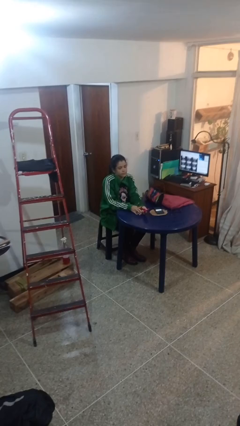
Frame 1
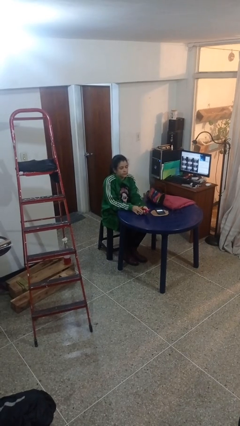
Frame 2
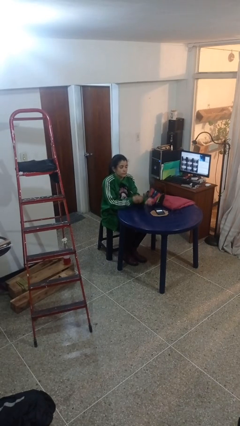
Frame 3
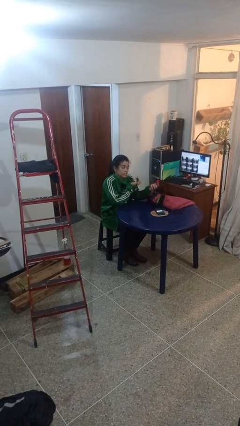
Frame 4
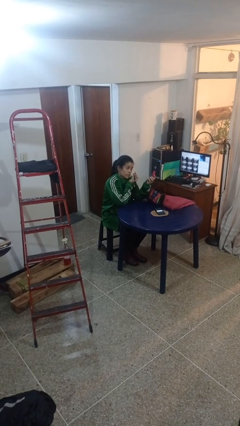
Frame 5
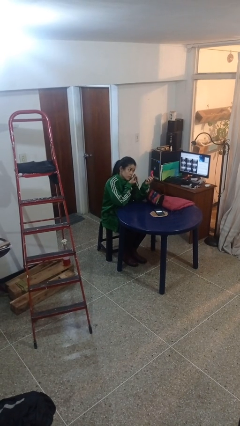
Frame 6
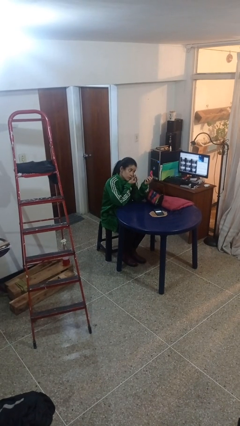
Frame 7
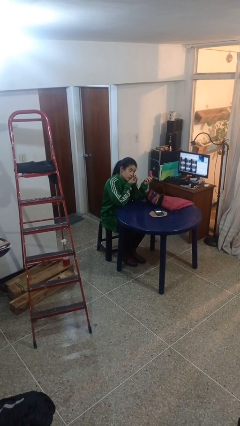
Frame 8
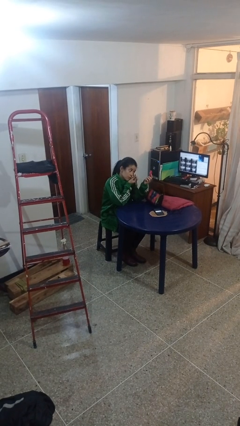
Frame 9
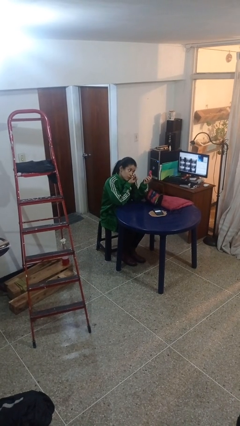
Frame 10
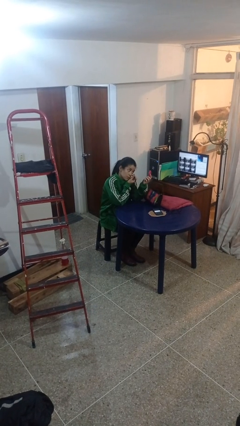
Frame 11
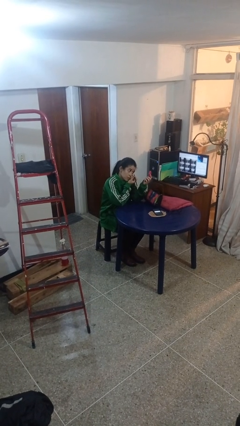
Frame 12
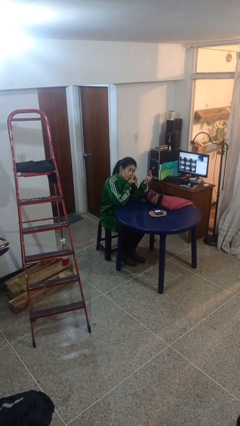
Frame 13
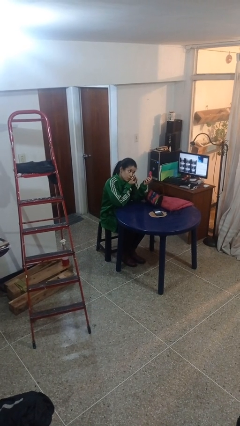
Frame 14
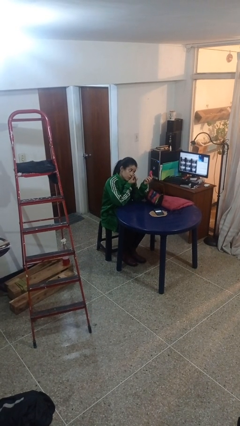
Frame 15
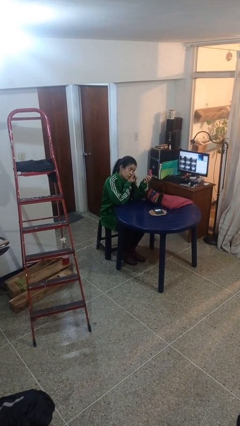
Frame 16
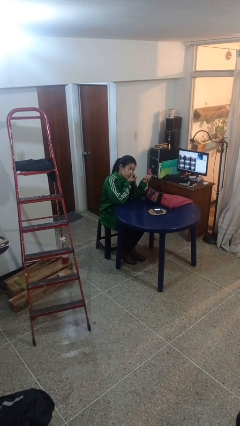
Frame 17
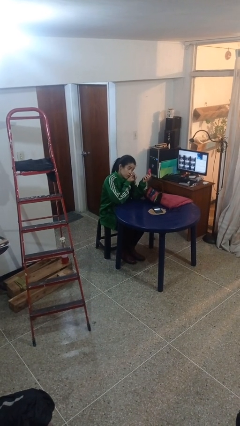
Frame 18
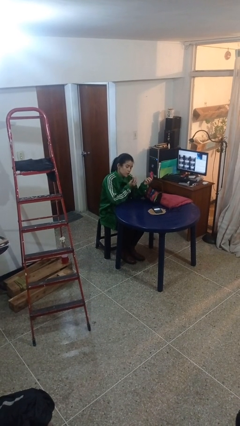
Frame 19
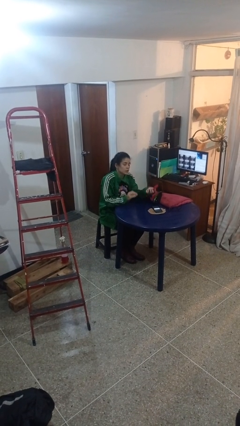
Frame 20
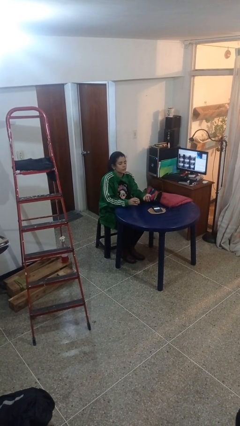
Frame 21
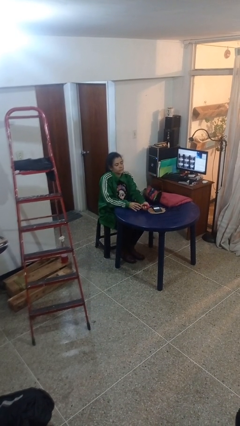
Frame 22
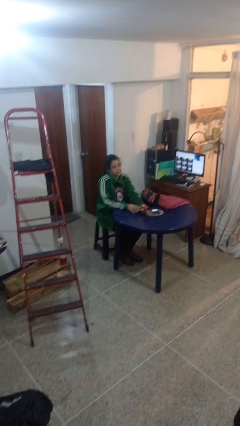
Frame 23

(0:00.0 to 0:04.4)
person applies eye makeup

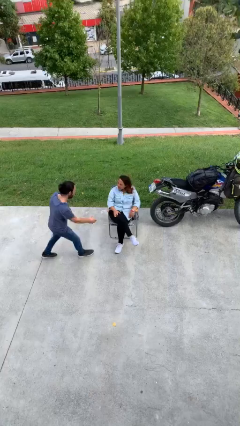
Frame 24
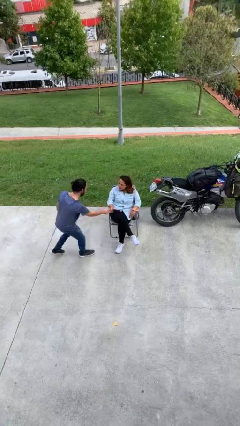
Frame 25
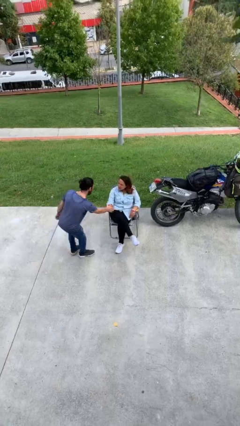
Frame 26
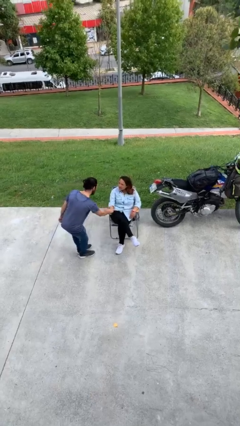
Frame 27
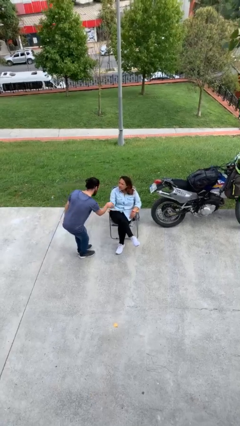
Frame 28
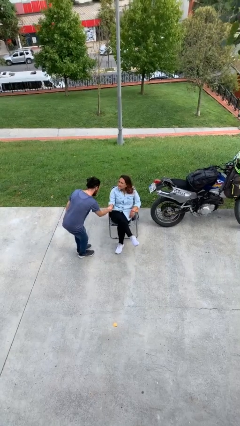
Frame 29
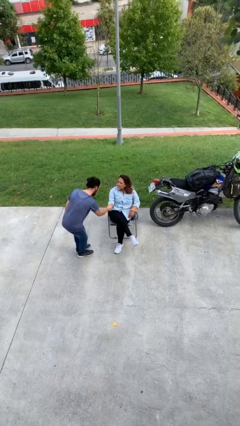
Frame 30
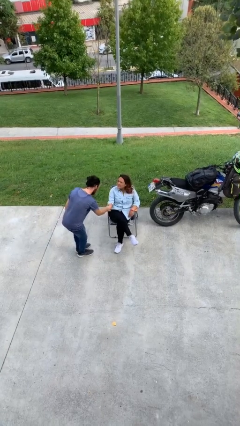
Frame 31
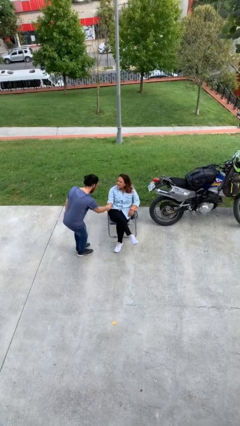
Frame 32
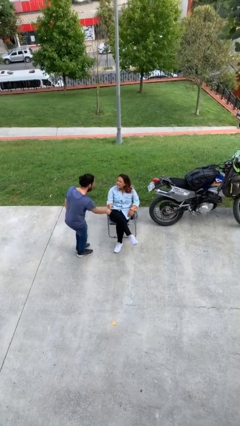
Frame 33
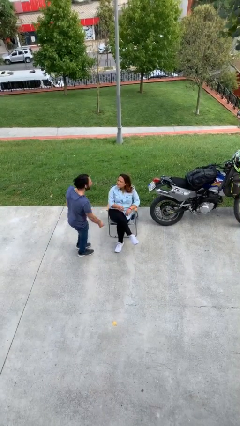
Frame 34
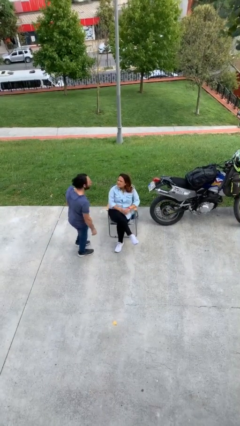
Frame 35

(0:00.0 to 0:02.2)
person shakes hand

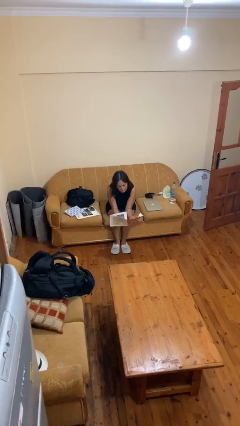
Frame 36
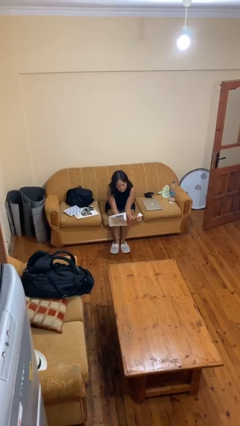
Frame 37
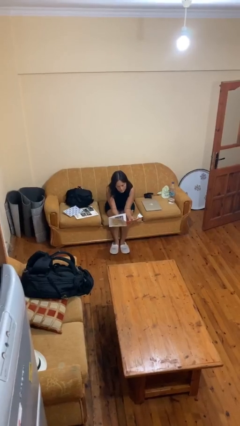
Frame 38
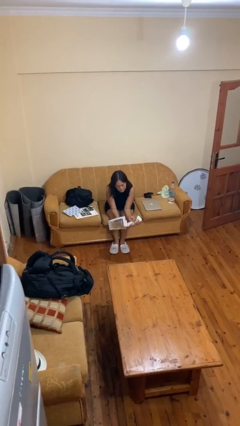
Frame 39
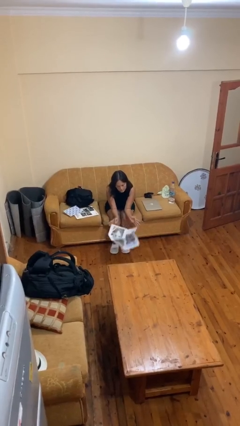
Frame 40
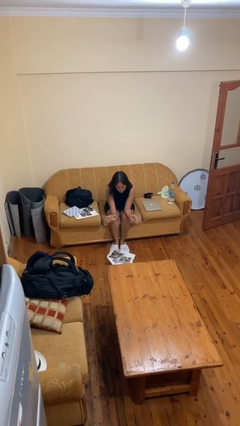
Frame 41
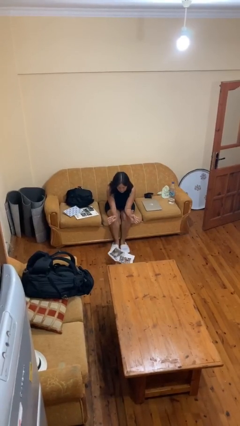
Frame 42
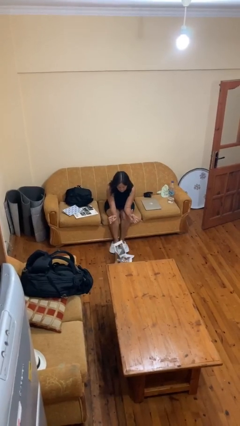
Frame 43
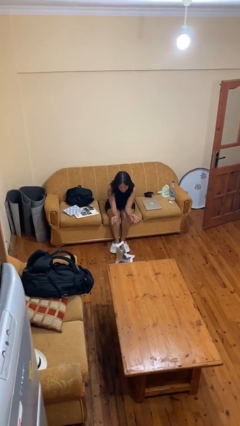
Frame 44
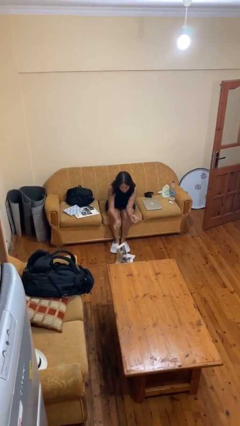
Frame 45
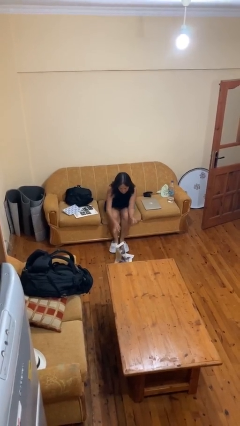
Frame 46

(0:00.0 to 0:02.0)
person drops object

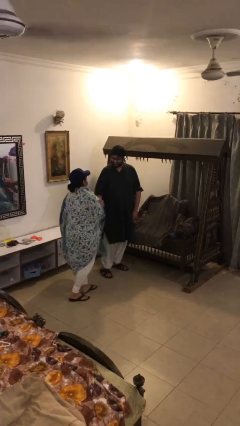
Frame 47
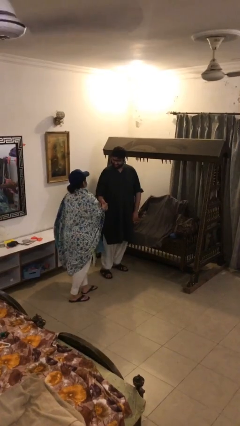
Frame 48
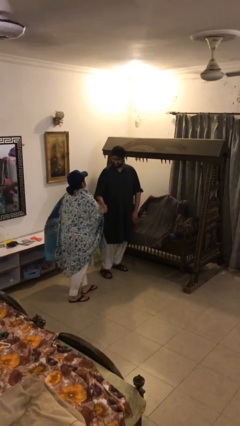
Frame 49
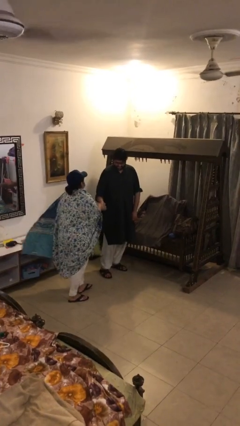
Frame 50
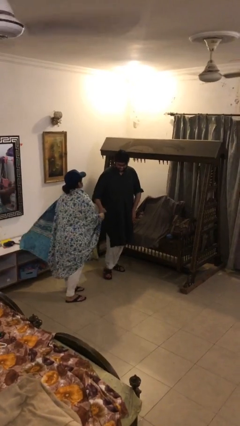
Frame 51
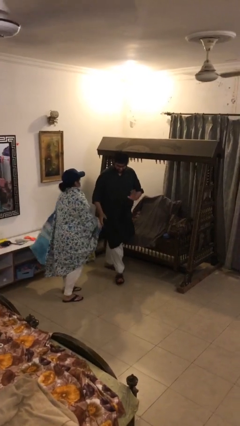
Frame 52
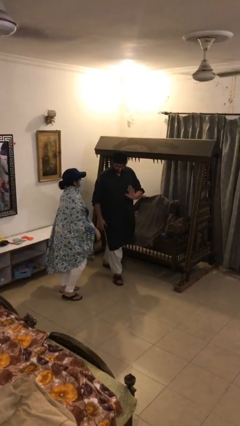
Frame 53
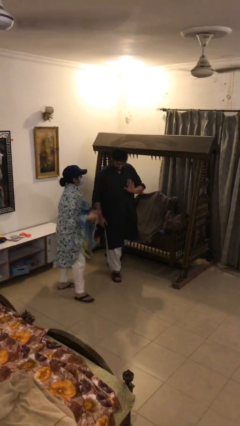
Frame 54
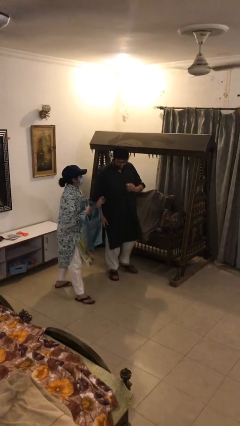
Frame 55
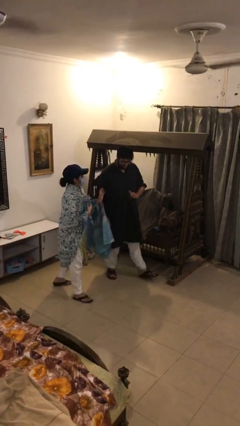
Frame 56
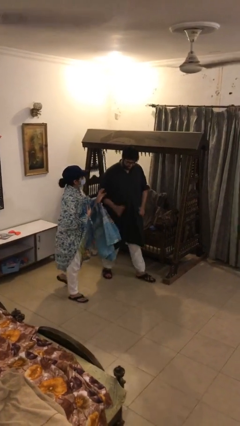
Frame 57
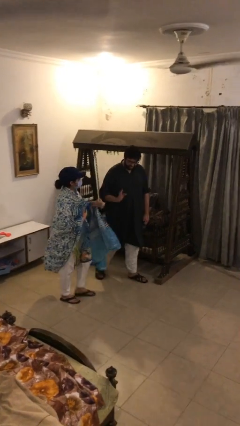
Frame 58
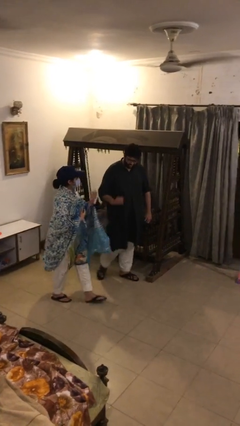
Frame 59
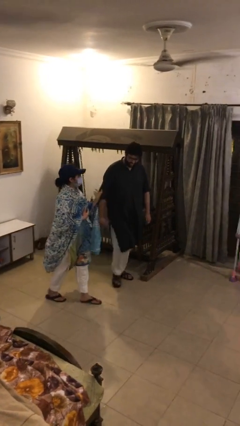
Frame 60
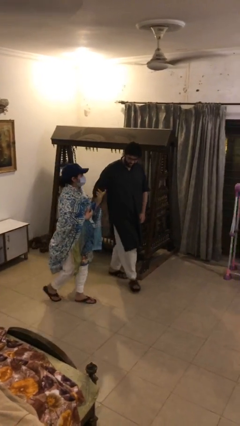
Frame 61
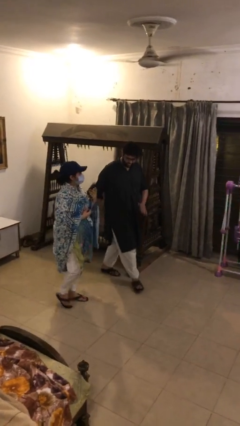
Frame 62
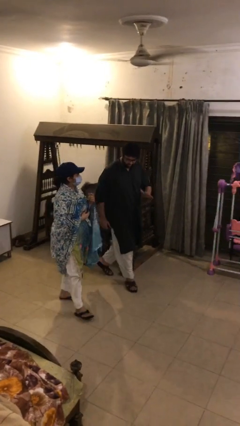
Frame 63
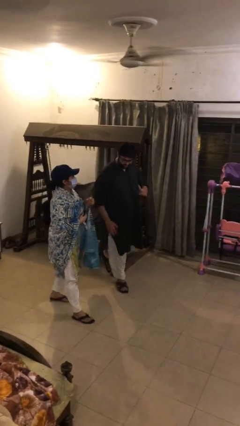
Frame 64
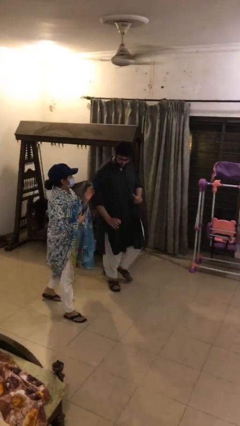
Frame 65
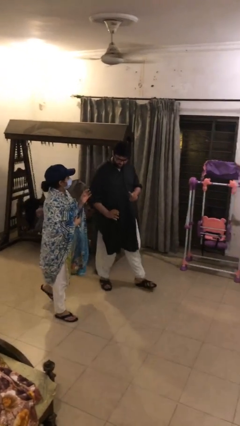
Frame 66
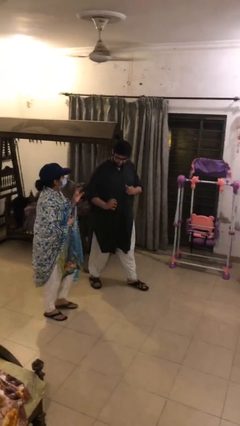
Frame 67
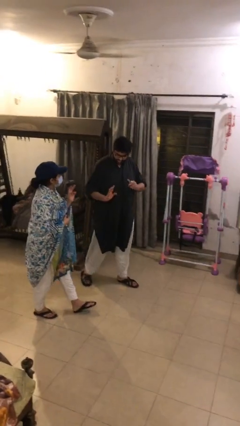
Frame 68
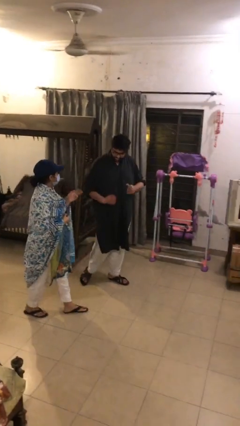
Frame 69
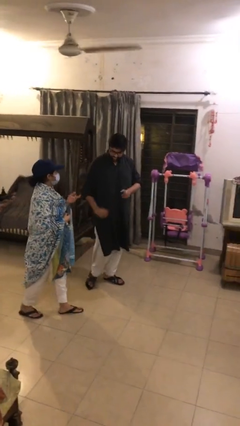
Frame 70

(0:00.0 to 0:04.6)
person talks to person

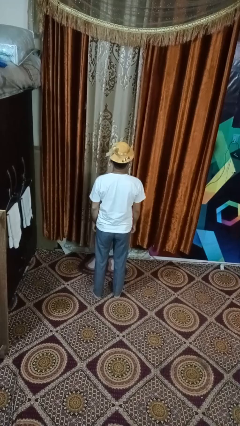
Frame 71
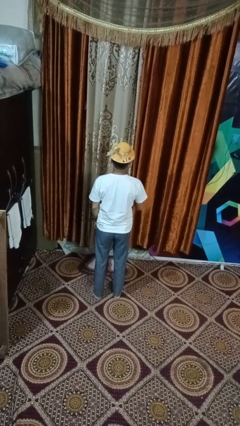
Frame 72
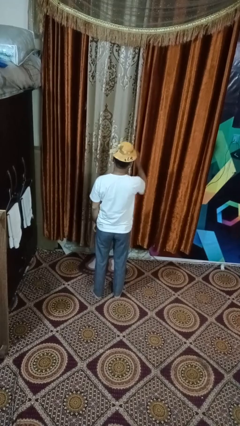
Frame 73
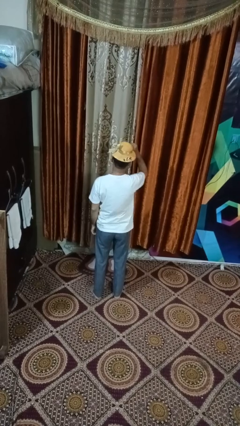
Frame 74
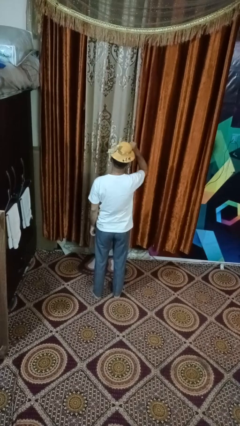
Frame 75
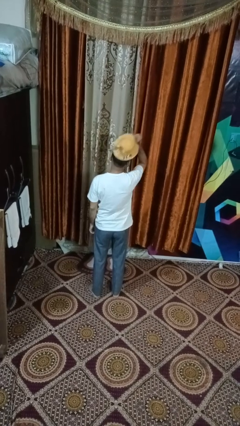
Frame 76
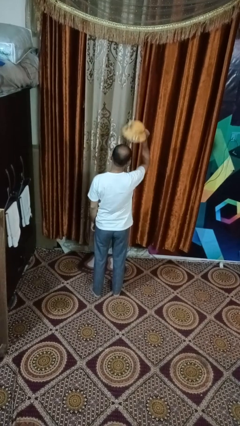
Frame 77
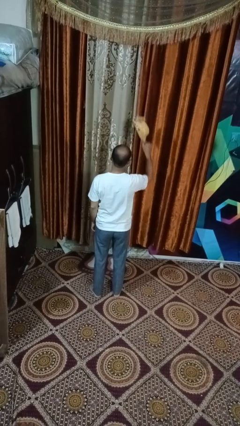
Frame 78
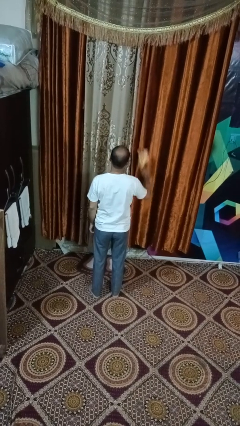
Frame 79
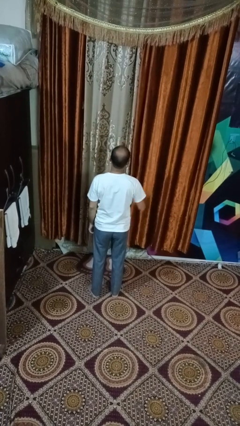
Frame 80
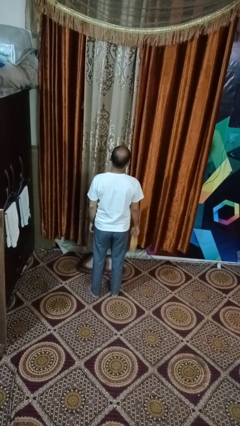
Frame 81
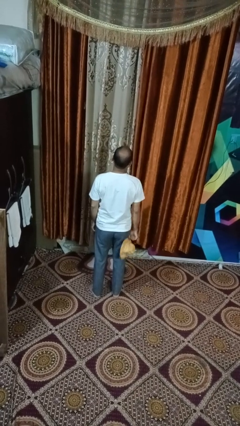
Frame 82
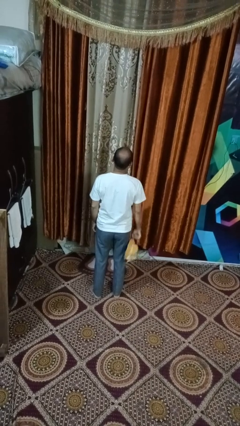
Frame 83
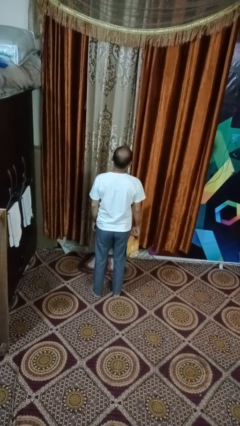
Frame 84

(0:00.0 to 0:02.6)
person takes off hat

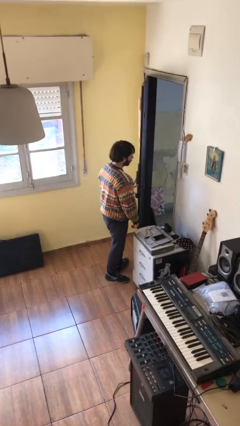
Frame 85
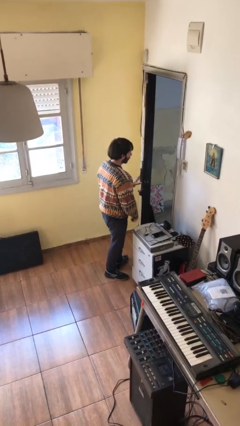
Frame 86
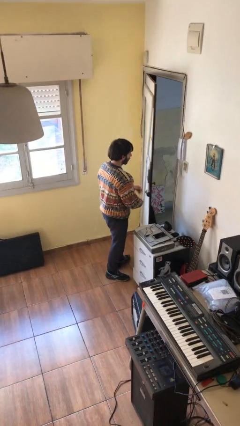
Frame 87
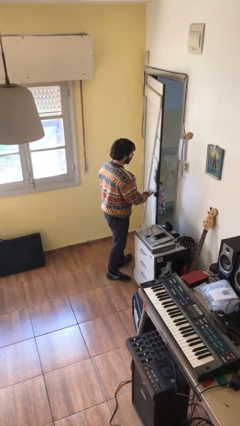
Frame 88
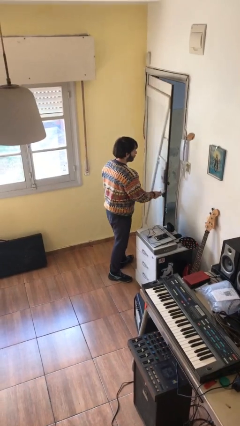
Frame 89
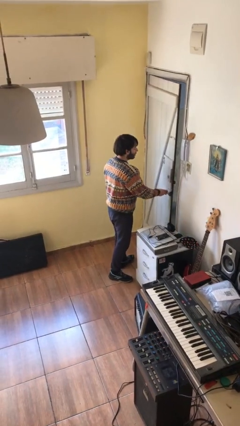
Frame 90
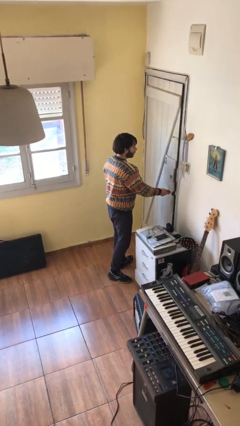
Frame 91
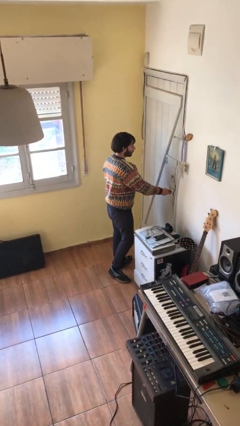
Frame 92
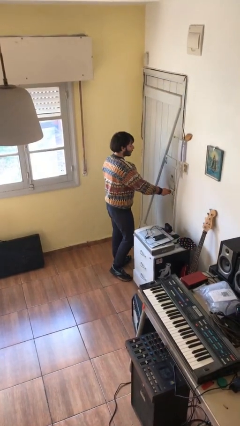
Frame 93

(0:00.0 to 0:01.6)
person closes facility door
